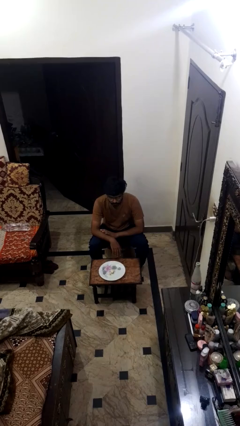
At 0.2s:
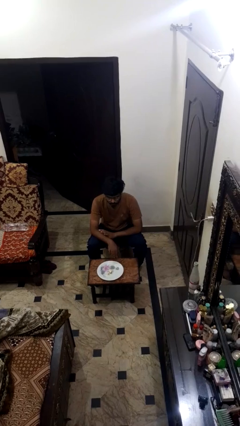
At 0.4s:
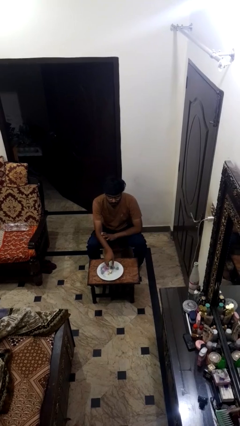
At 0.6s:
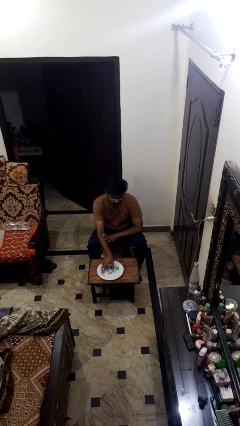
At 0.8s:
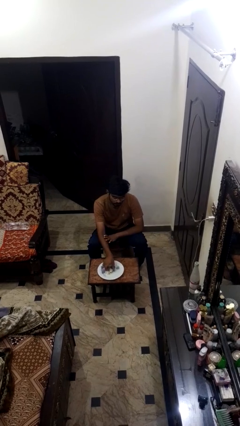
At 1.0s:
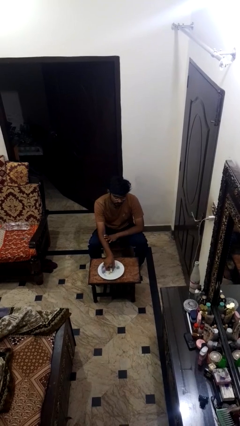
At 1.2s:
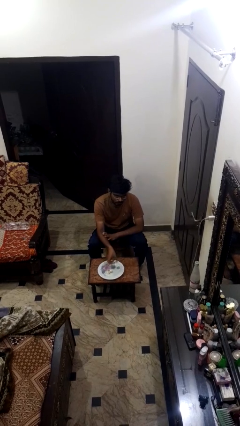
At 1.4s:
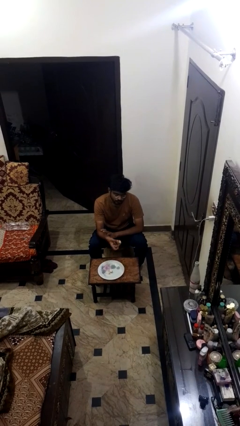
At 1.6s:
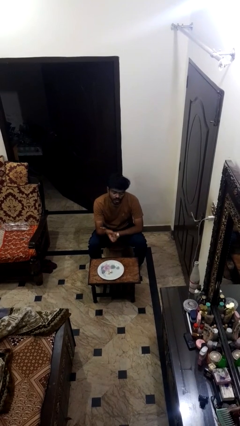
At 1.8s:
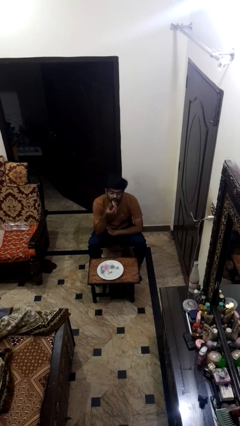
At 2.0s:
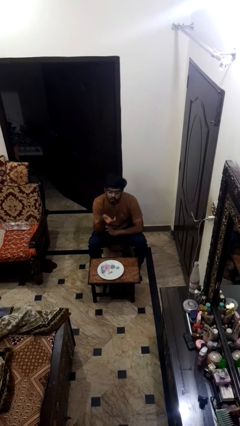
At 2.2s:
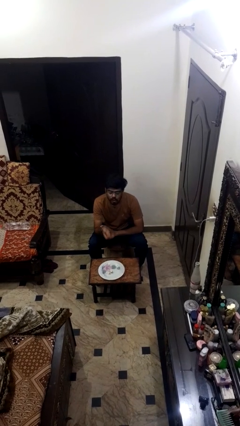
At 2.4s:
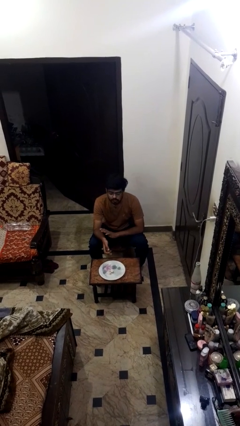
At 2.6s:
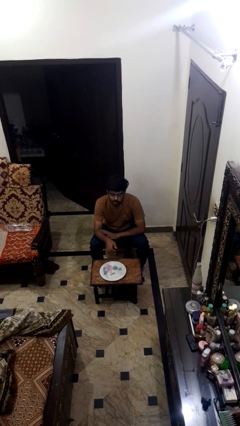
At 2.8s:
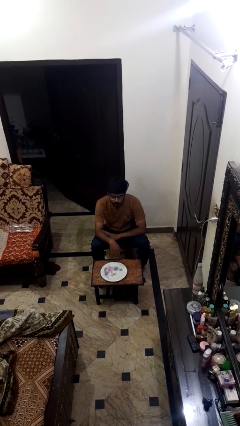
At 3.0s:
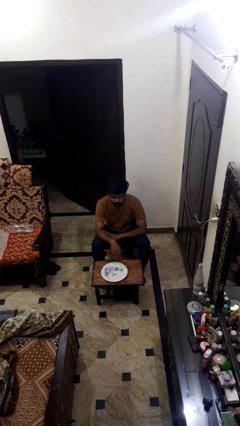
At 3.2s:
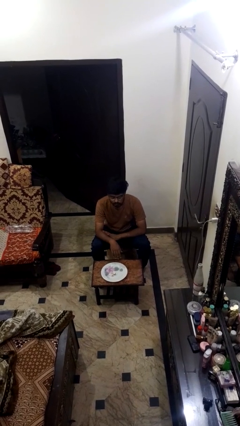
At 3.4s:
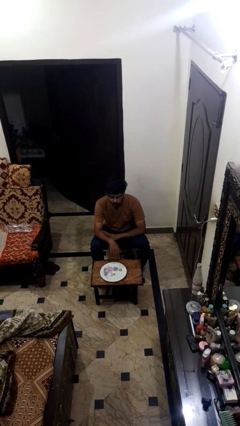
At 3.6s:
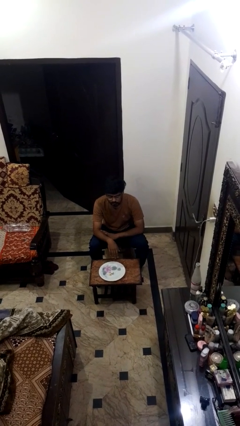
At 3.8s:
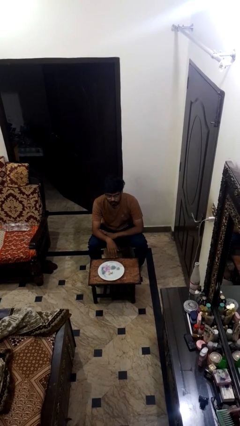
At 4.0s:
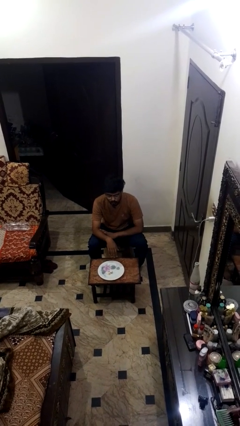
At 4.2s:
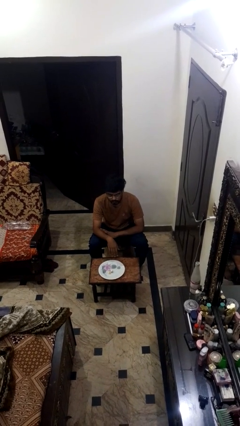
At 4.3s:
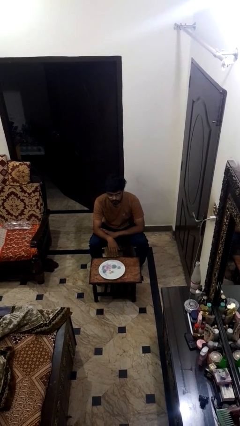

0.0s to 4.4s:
person eats with hands

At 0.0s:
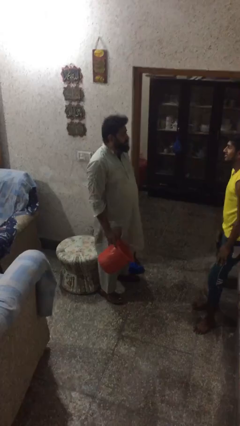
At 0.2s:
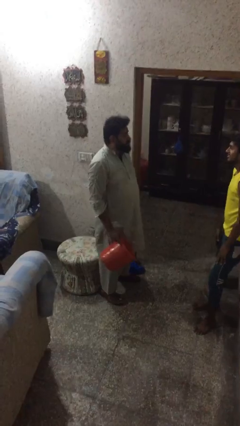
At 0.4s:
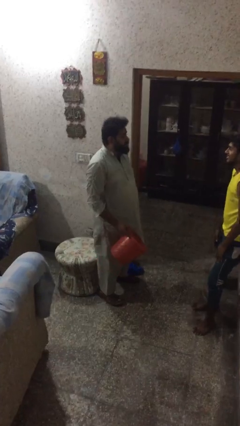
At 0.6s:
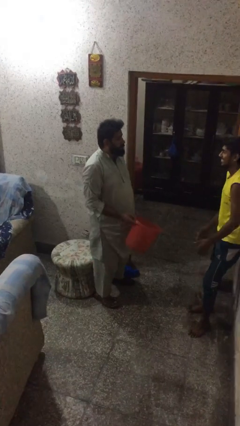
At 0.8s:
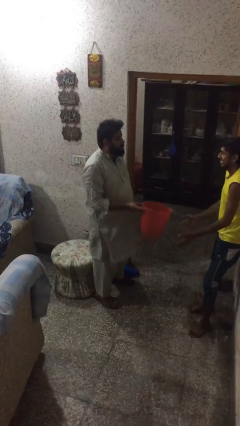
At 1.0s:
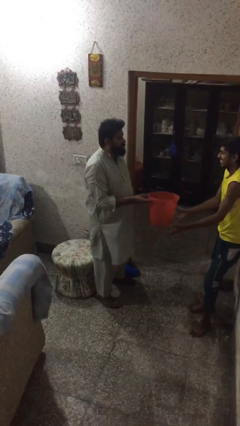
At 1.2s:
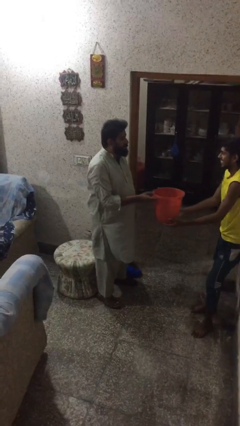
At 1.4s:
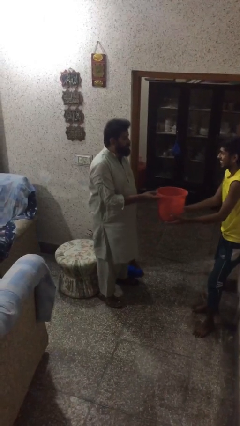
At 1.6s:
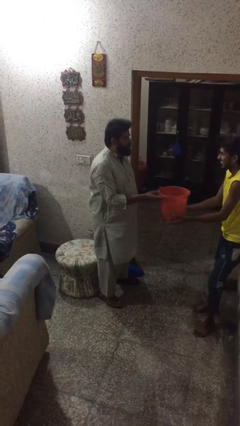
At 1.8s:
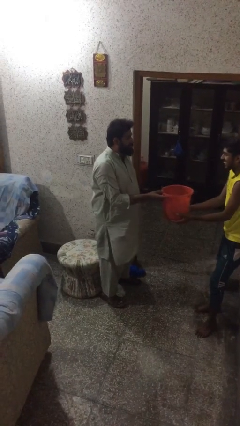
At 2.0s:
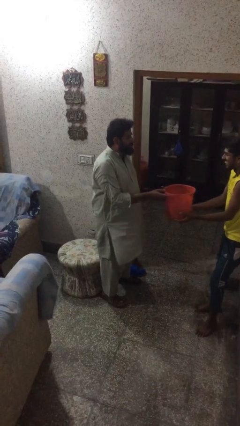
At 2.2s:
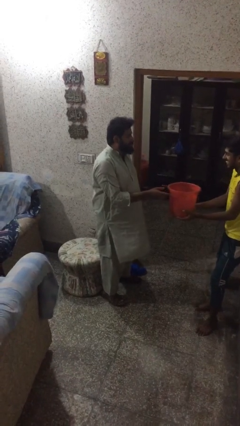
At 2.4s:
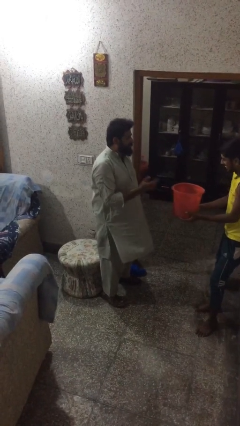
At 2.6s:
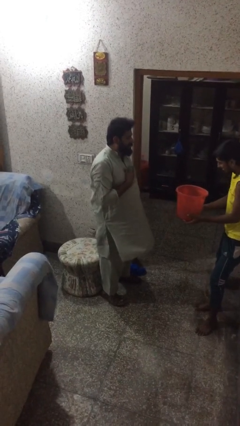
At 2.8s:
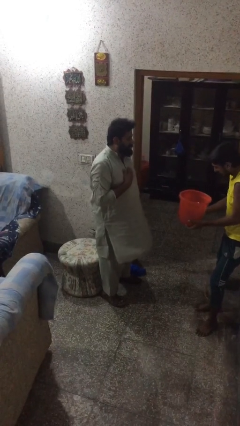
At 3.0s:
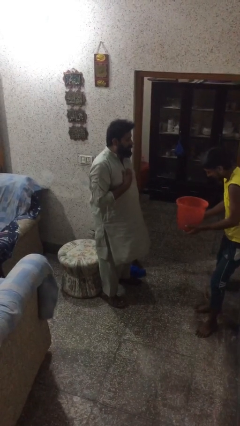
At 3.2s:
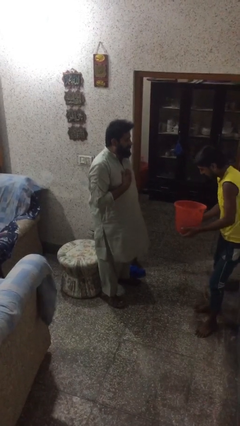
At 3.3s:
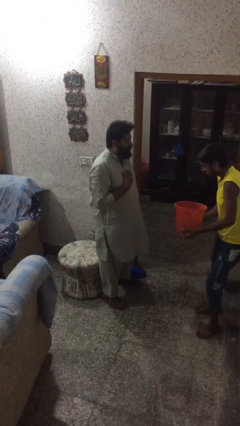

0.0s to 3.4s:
person transfers object to person

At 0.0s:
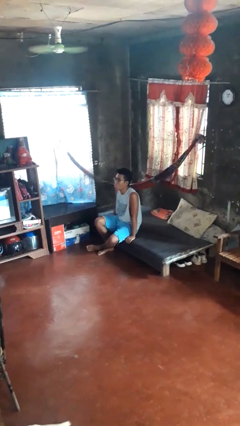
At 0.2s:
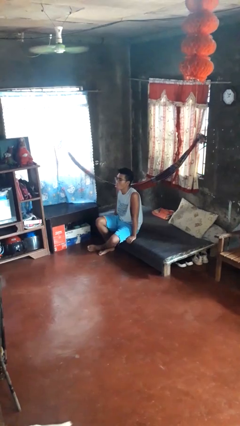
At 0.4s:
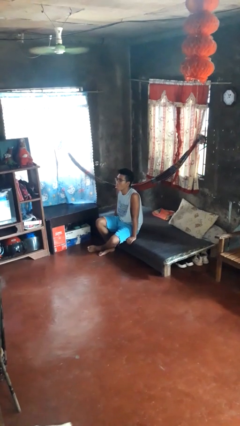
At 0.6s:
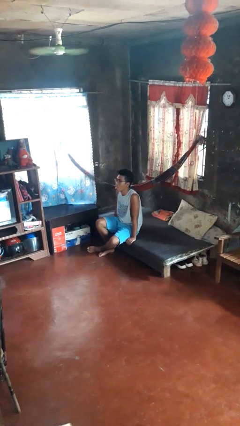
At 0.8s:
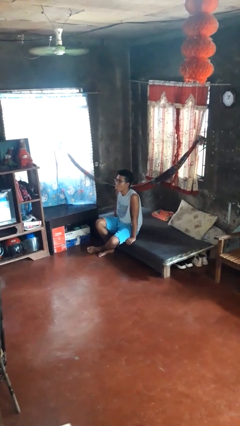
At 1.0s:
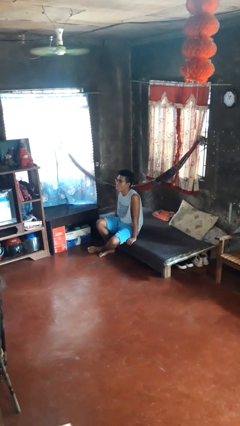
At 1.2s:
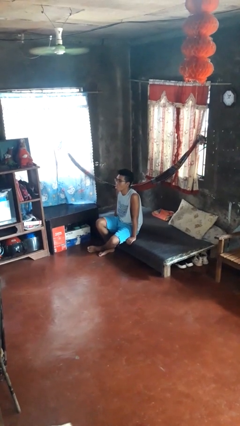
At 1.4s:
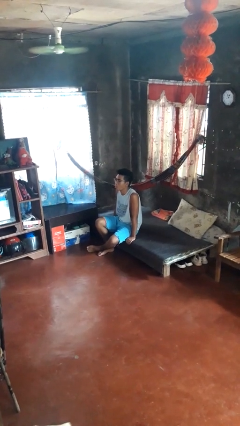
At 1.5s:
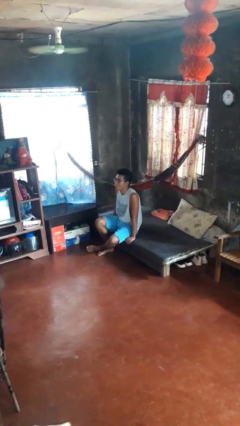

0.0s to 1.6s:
person sticks out tongue

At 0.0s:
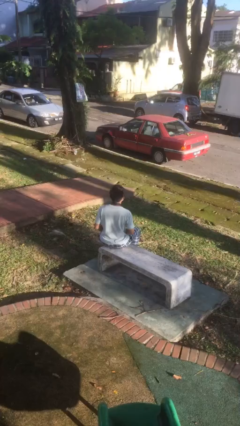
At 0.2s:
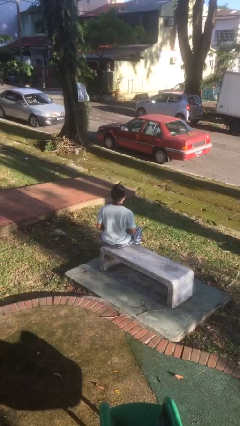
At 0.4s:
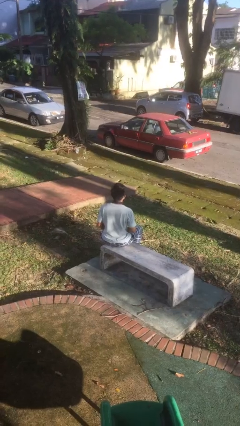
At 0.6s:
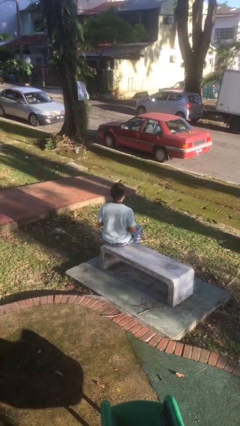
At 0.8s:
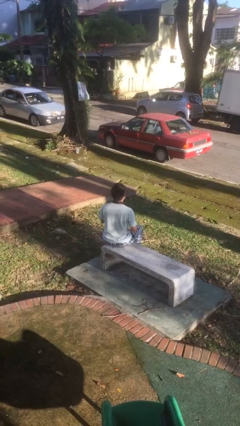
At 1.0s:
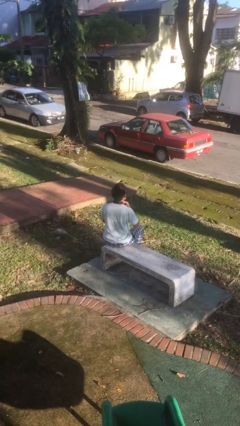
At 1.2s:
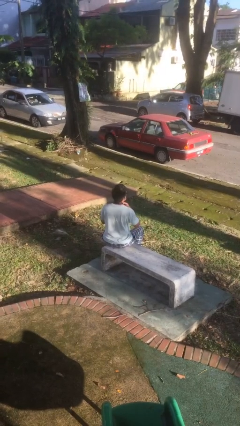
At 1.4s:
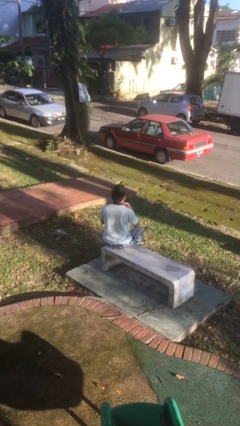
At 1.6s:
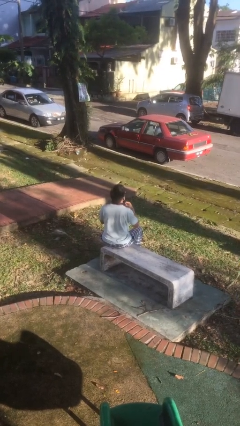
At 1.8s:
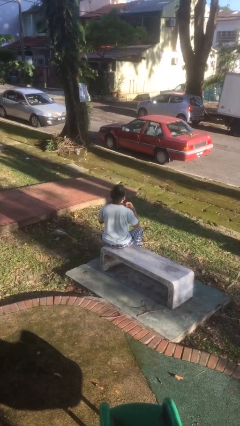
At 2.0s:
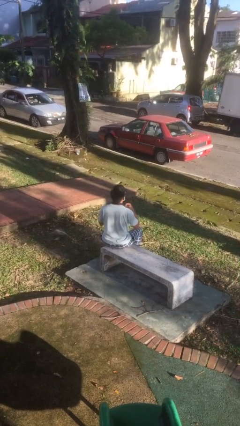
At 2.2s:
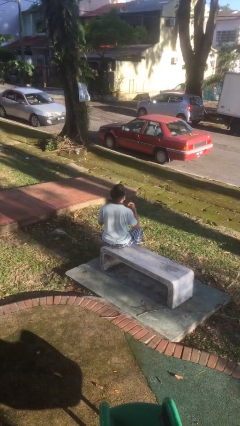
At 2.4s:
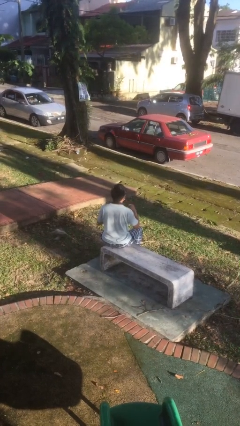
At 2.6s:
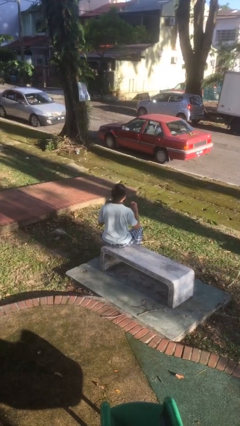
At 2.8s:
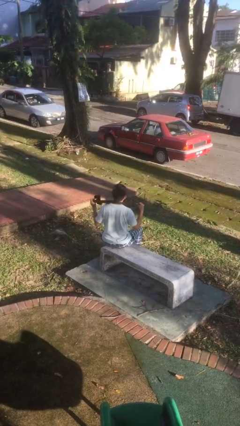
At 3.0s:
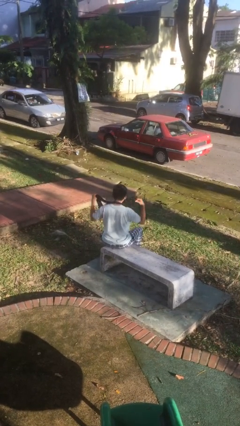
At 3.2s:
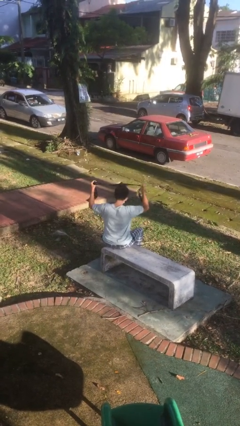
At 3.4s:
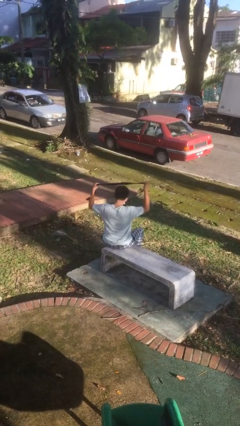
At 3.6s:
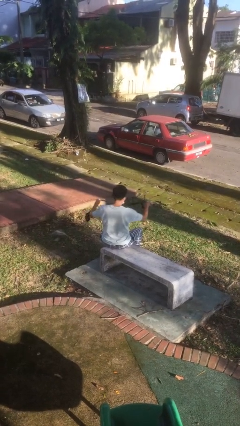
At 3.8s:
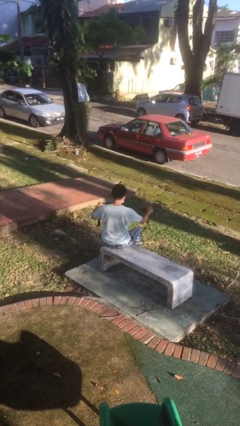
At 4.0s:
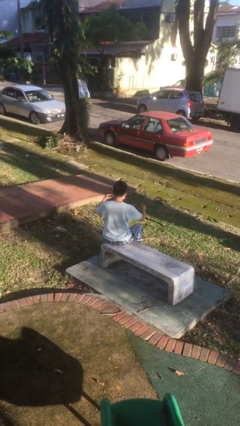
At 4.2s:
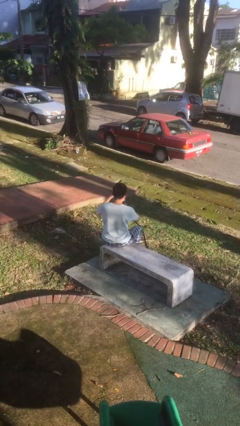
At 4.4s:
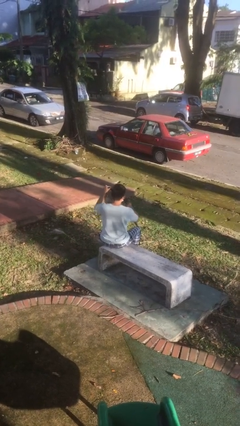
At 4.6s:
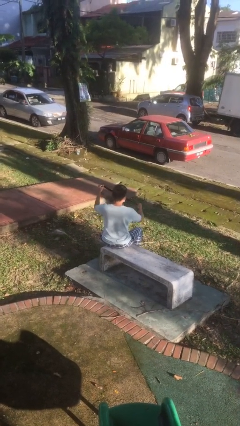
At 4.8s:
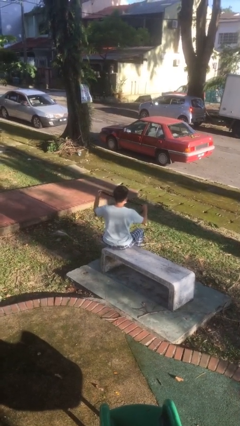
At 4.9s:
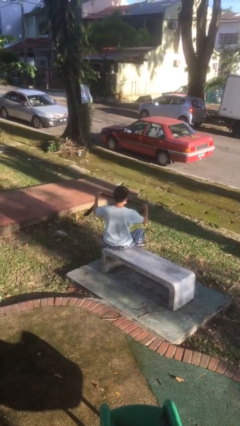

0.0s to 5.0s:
person takes off necktie

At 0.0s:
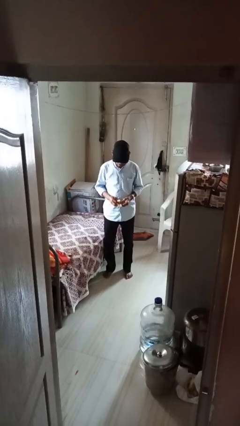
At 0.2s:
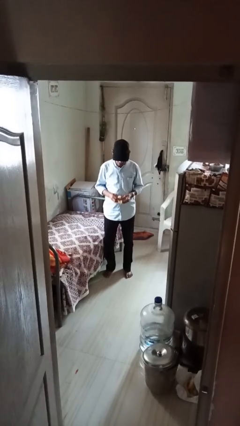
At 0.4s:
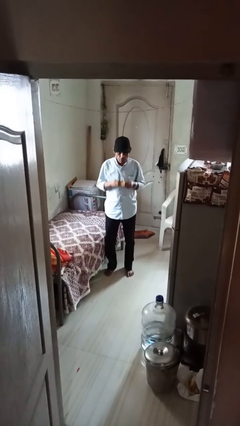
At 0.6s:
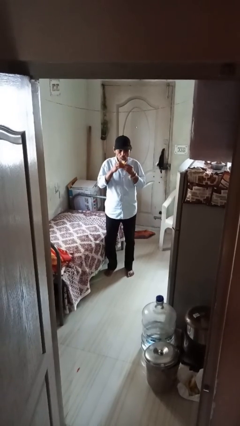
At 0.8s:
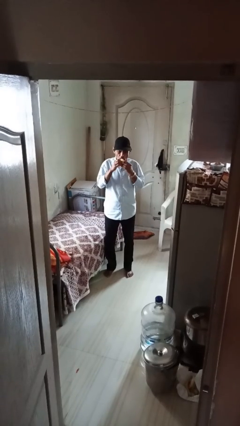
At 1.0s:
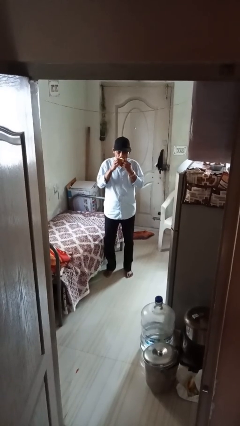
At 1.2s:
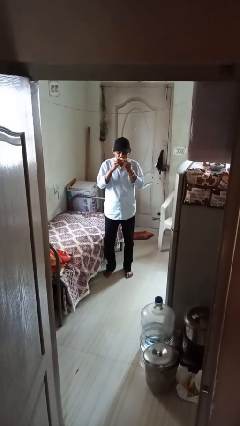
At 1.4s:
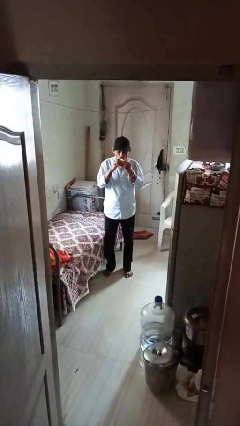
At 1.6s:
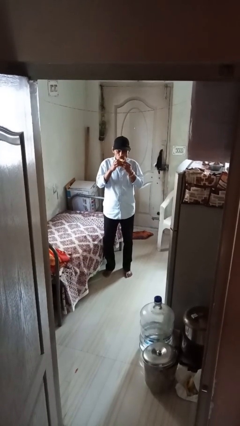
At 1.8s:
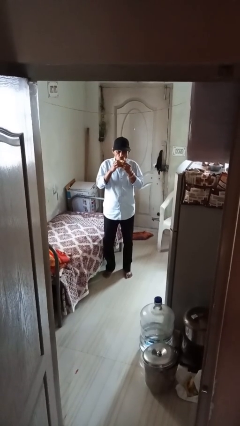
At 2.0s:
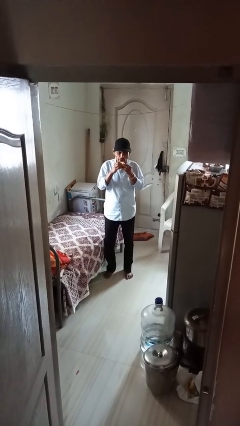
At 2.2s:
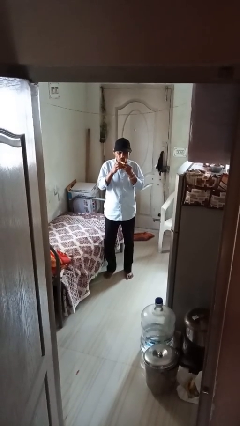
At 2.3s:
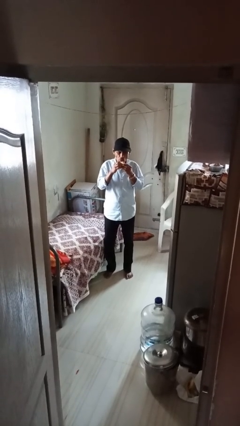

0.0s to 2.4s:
person eats banana

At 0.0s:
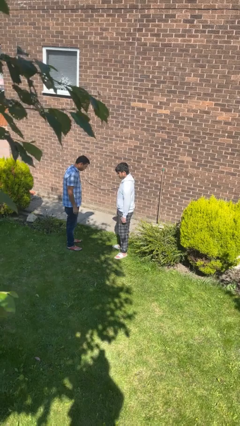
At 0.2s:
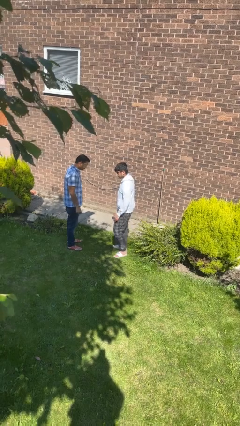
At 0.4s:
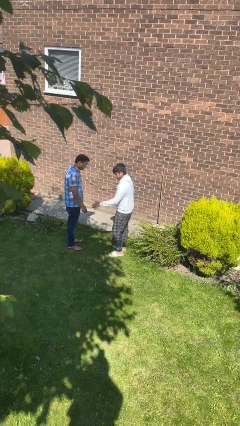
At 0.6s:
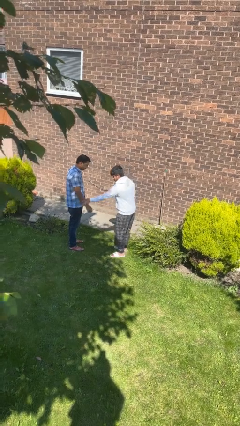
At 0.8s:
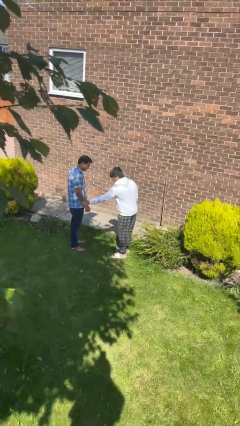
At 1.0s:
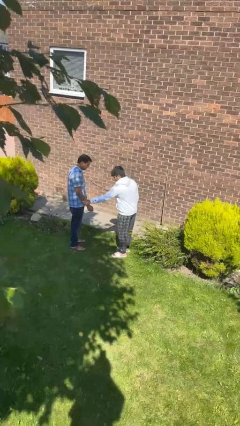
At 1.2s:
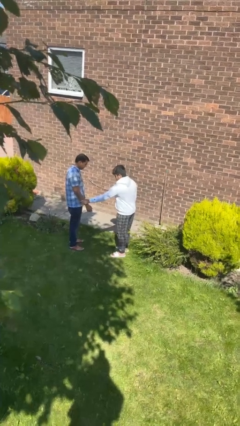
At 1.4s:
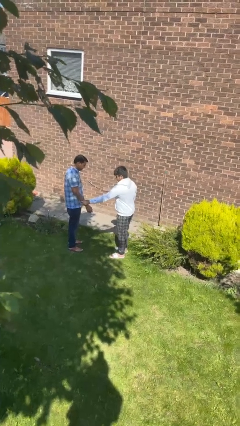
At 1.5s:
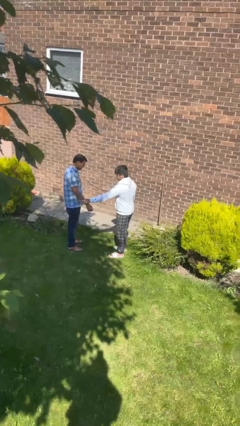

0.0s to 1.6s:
person grabs person by forearm
